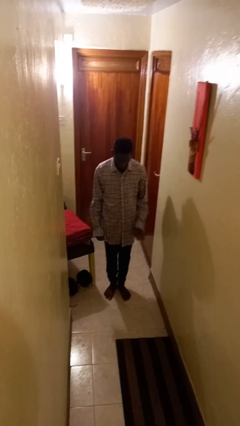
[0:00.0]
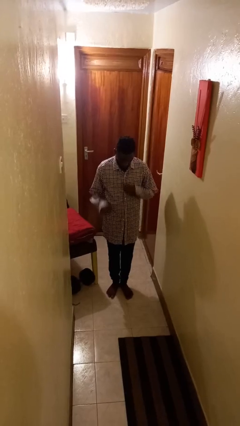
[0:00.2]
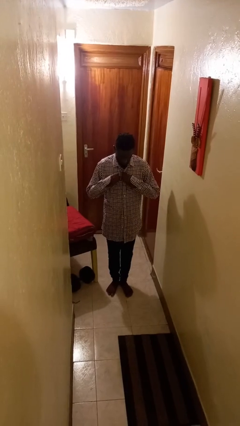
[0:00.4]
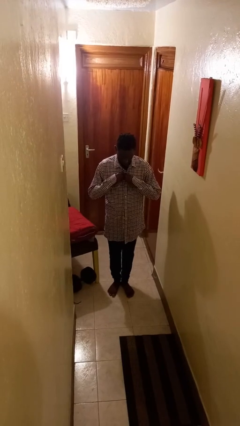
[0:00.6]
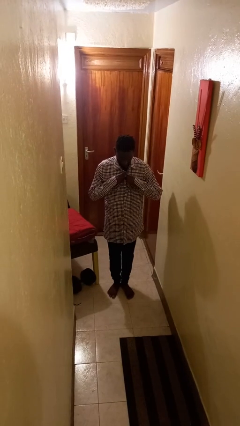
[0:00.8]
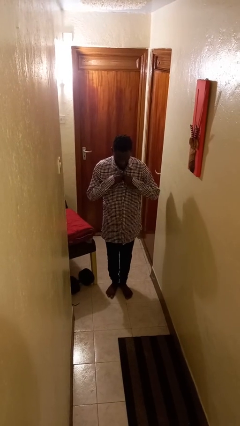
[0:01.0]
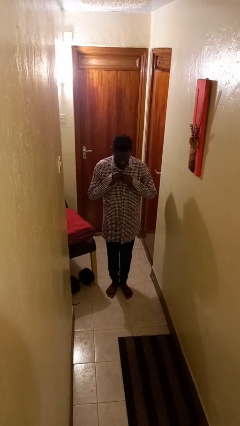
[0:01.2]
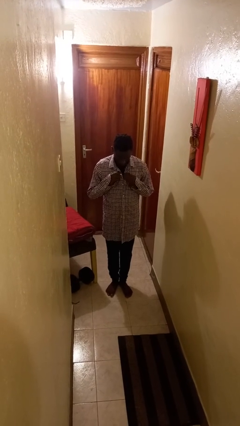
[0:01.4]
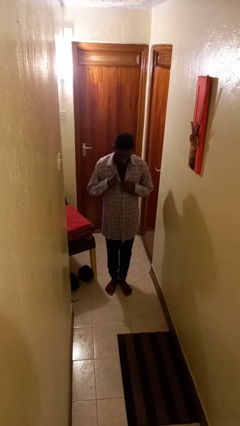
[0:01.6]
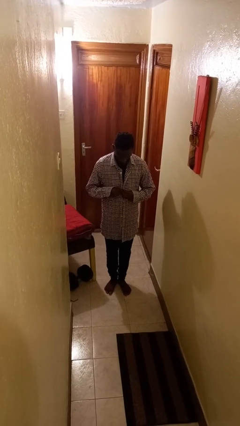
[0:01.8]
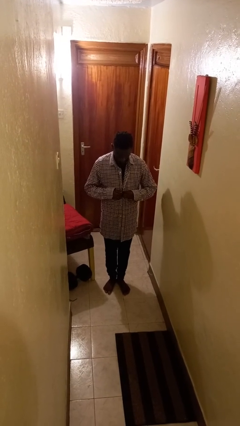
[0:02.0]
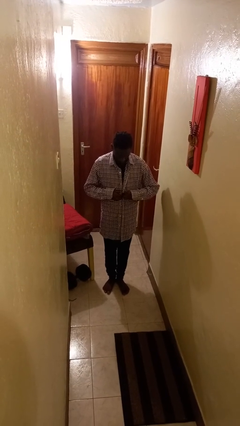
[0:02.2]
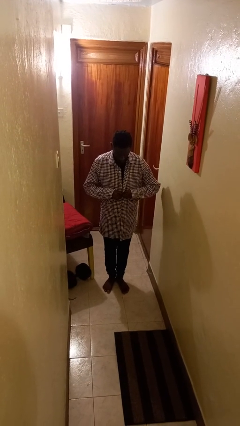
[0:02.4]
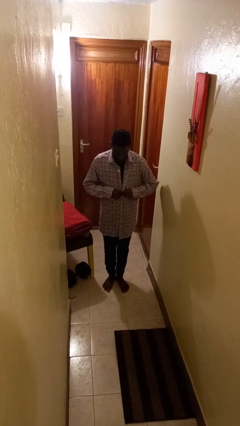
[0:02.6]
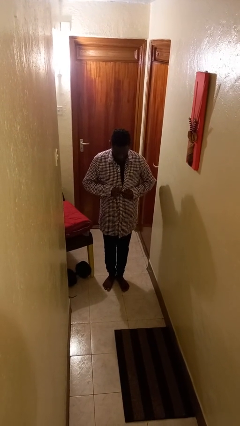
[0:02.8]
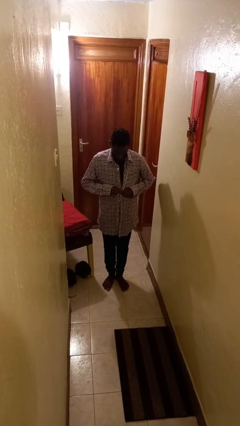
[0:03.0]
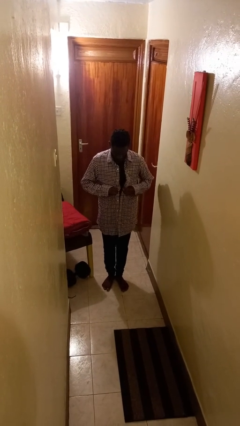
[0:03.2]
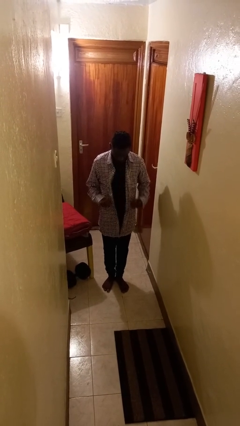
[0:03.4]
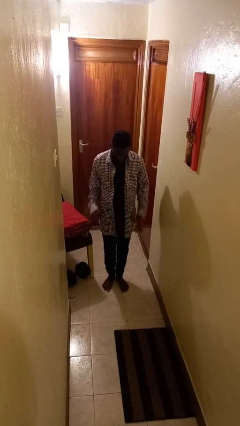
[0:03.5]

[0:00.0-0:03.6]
person unbuttons shirt

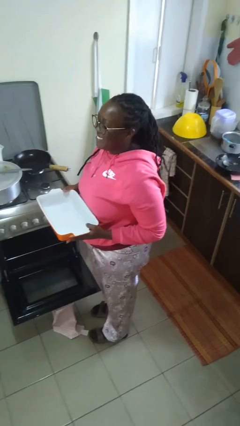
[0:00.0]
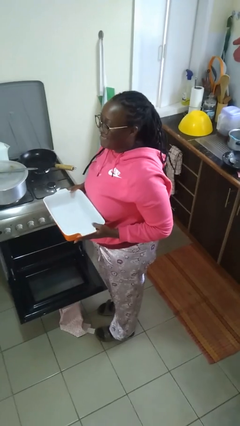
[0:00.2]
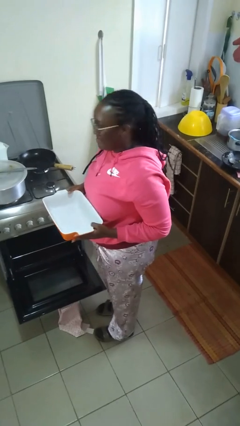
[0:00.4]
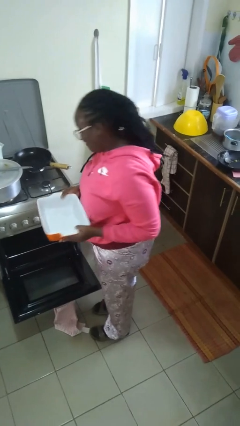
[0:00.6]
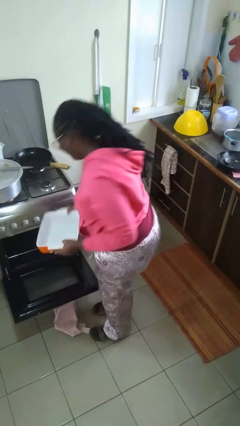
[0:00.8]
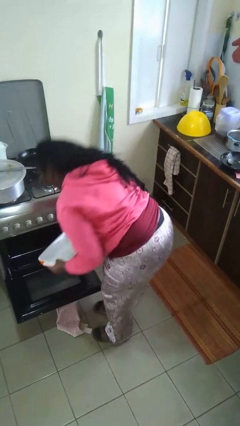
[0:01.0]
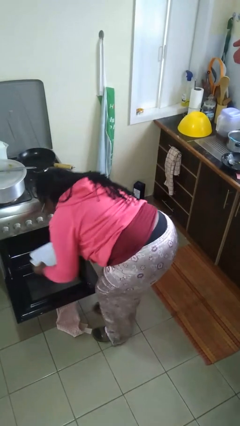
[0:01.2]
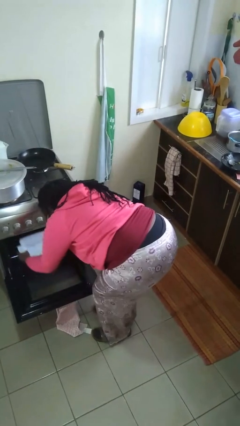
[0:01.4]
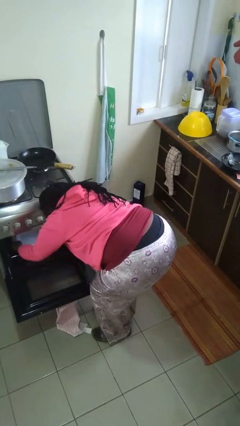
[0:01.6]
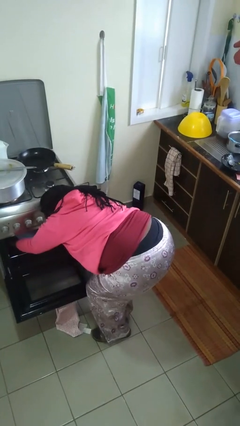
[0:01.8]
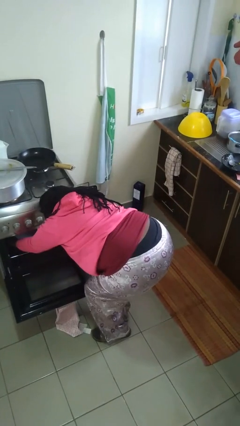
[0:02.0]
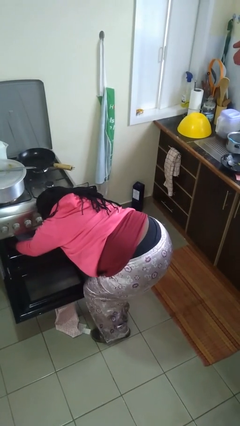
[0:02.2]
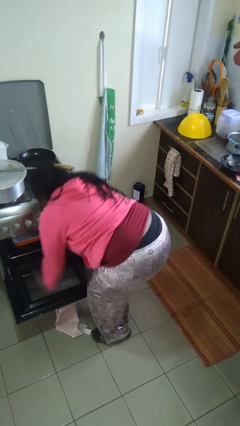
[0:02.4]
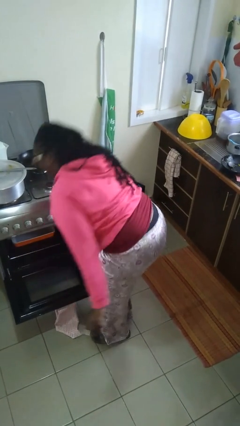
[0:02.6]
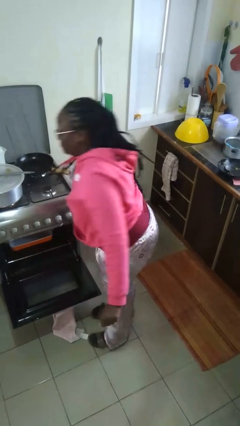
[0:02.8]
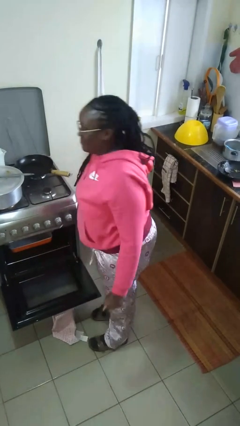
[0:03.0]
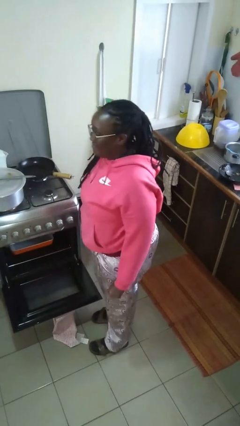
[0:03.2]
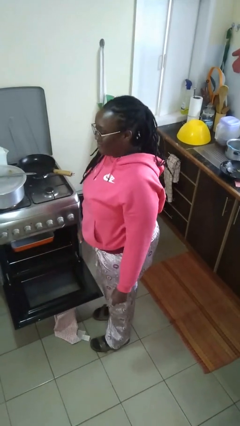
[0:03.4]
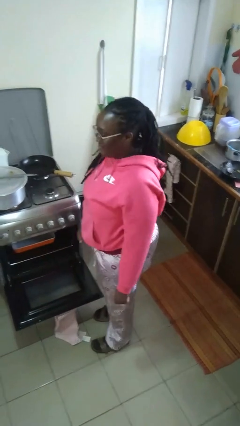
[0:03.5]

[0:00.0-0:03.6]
person puts object into oven

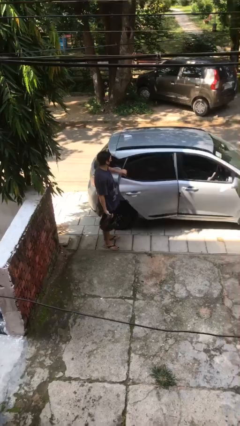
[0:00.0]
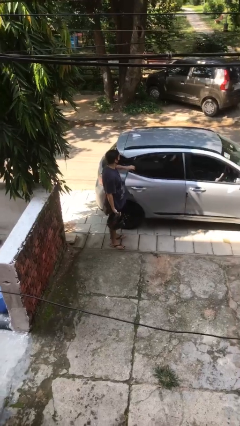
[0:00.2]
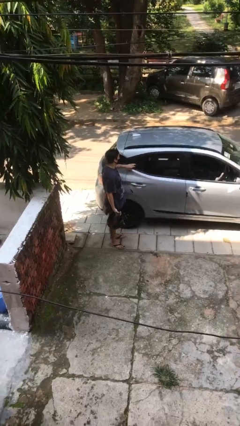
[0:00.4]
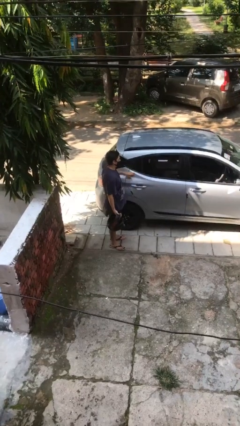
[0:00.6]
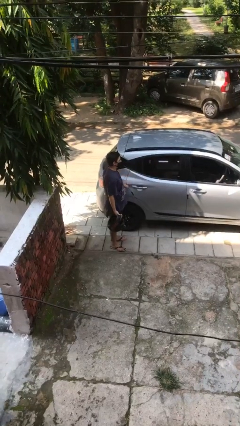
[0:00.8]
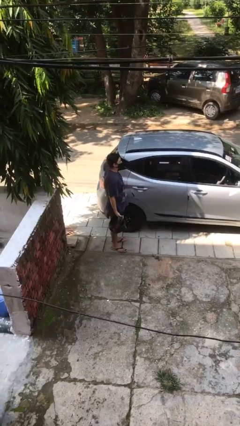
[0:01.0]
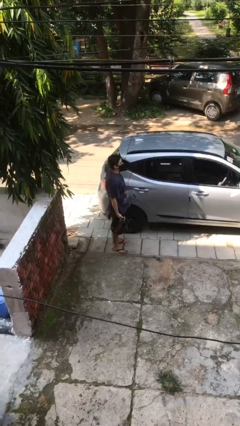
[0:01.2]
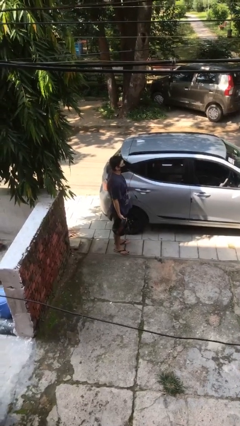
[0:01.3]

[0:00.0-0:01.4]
person closes car door

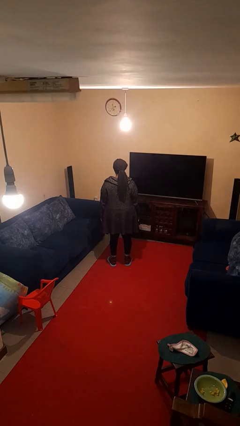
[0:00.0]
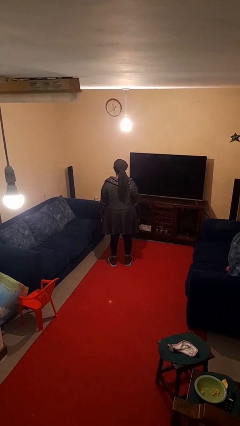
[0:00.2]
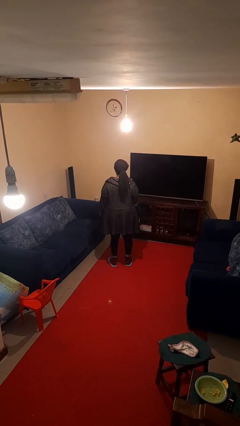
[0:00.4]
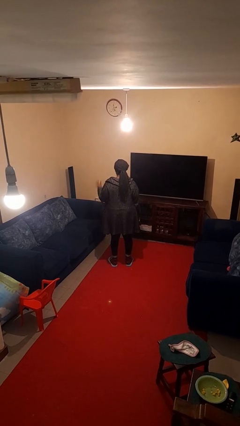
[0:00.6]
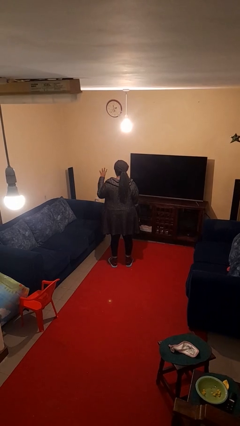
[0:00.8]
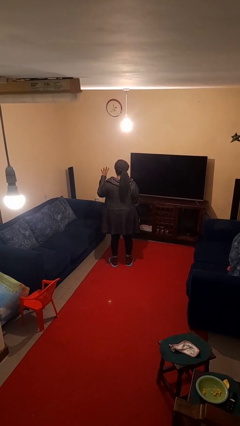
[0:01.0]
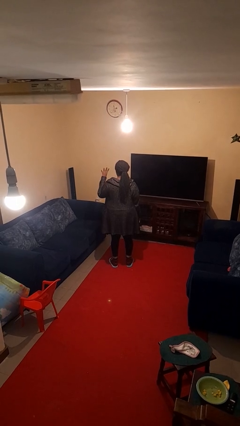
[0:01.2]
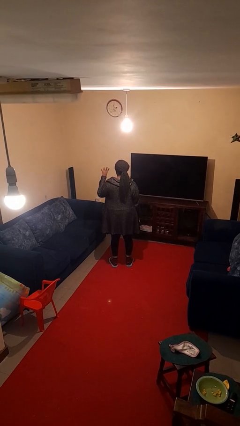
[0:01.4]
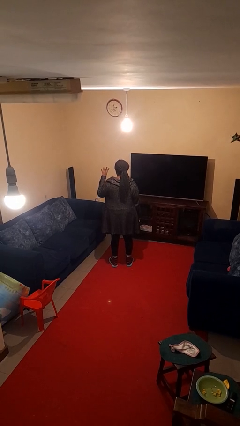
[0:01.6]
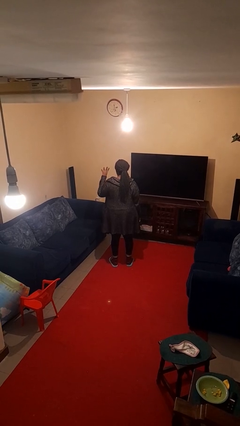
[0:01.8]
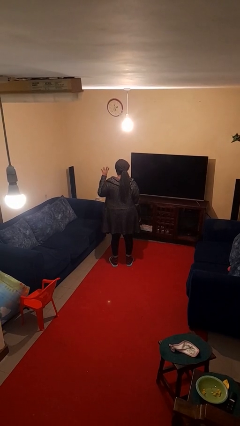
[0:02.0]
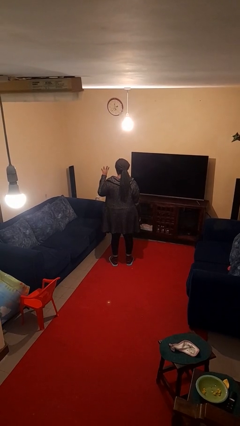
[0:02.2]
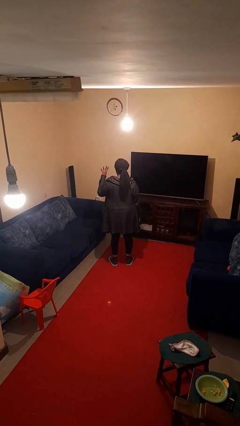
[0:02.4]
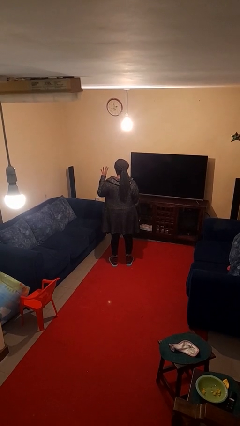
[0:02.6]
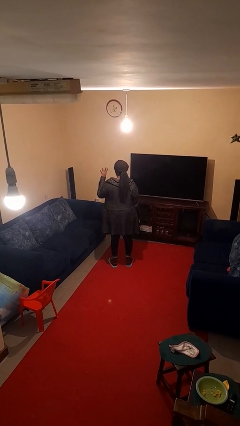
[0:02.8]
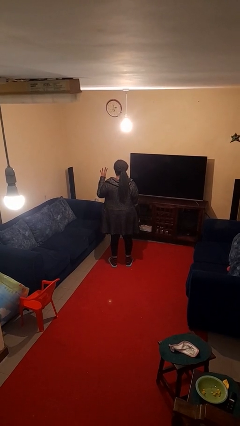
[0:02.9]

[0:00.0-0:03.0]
person gestures number four

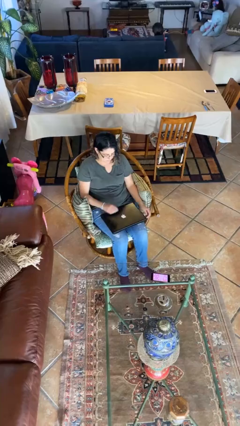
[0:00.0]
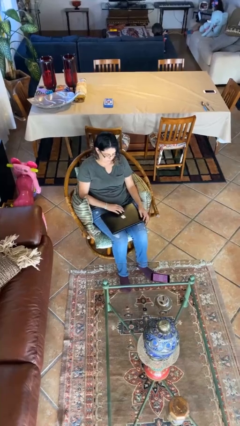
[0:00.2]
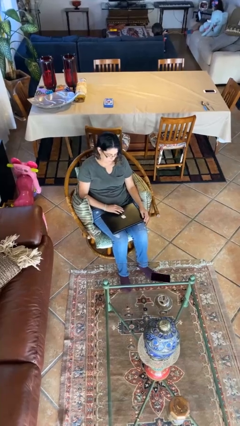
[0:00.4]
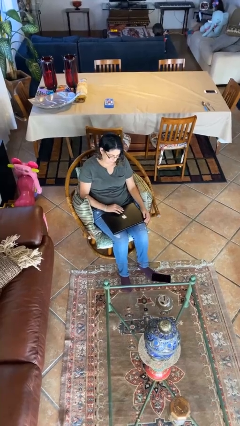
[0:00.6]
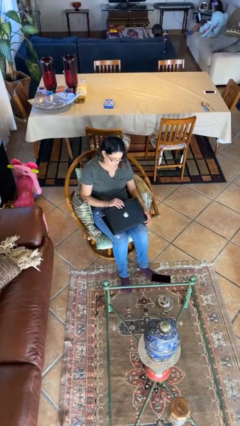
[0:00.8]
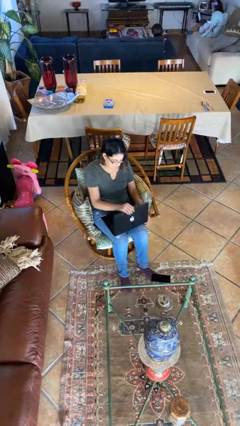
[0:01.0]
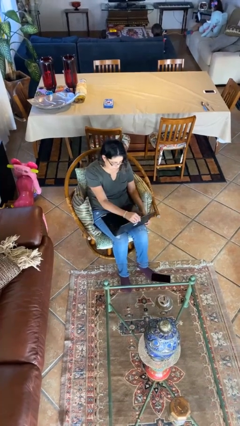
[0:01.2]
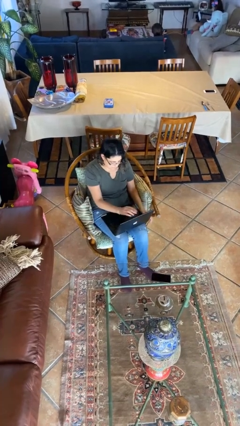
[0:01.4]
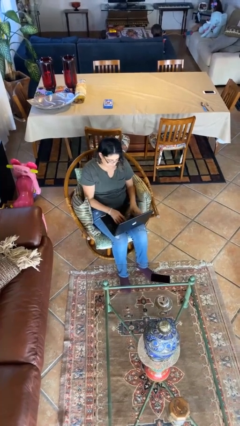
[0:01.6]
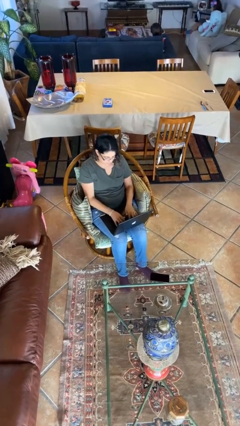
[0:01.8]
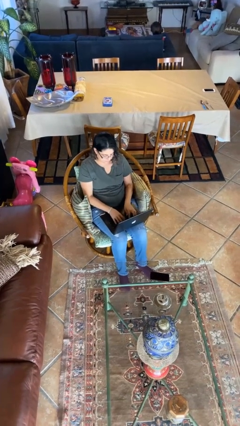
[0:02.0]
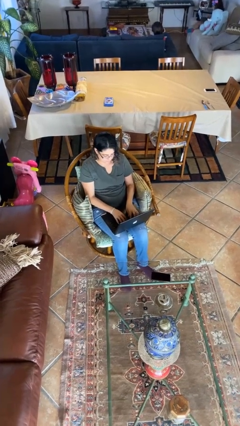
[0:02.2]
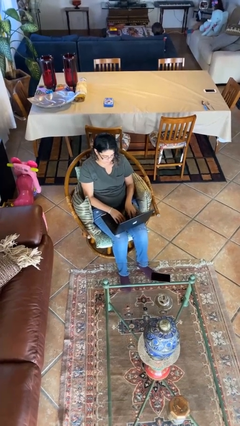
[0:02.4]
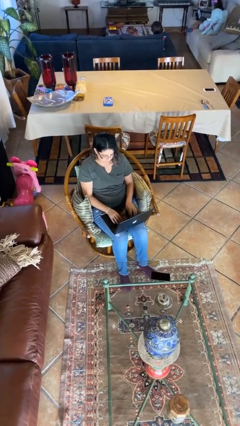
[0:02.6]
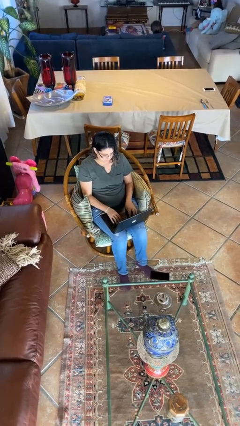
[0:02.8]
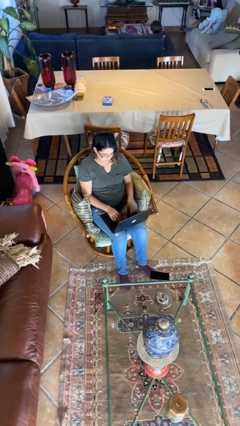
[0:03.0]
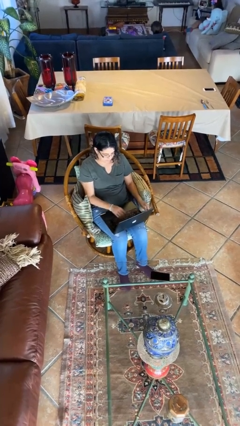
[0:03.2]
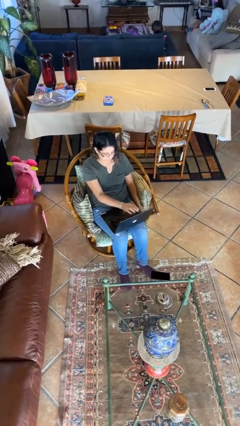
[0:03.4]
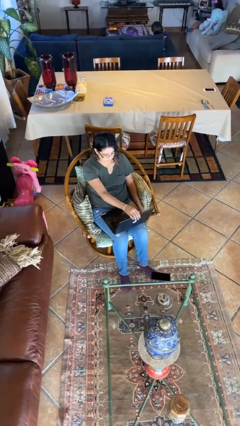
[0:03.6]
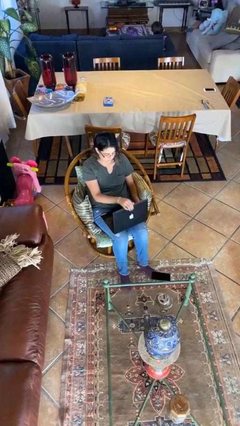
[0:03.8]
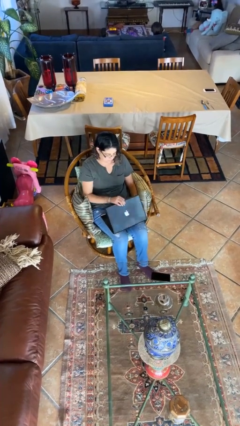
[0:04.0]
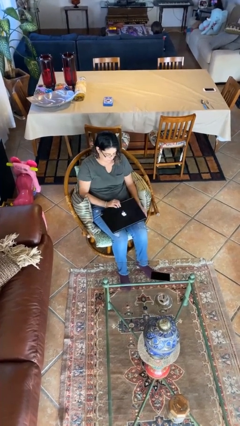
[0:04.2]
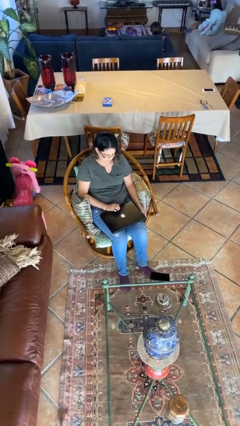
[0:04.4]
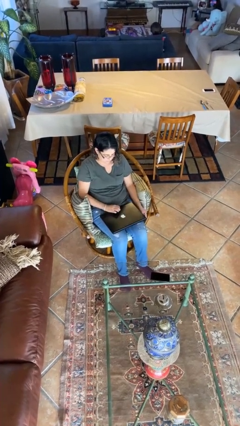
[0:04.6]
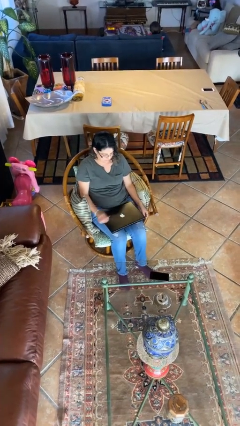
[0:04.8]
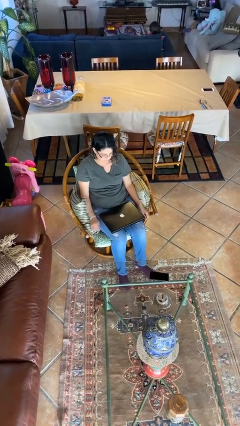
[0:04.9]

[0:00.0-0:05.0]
person interacts with laptop

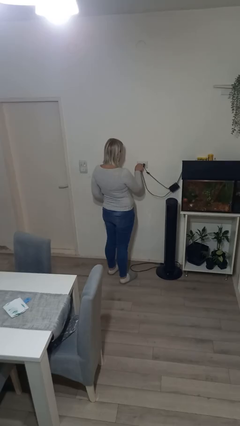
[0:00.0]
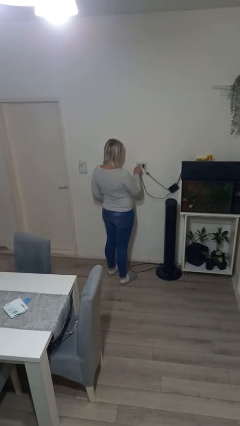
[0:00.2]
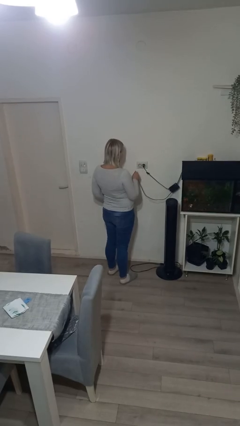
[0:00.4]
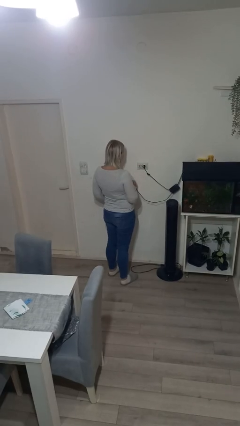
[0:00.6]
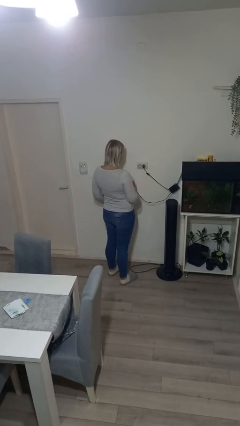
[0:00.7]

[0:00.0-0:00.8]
person unplugs from electrical socket

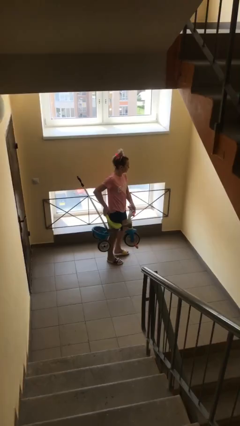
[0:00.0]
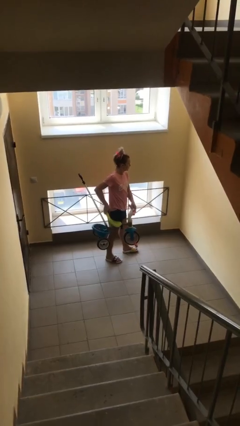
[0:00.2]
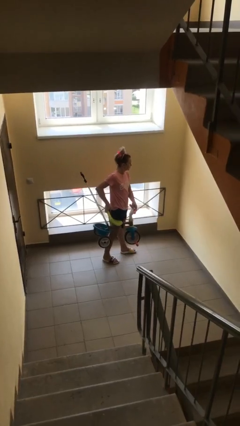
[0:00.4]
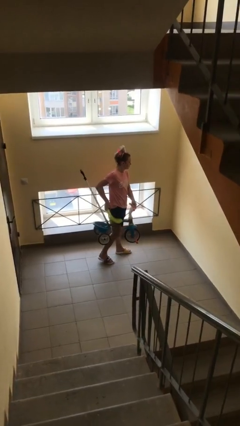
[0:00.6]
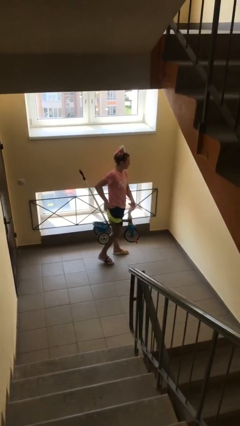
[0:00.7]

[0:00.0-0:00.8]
person carries bicycle
